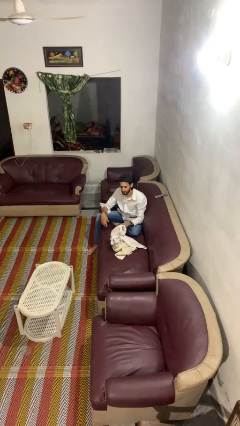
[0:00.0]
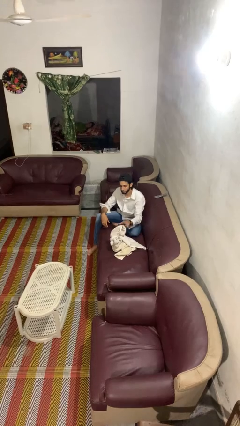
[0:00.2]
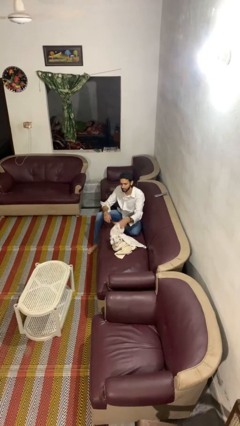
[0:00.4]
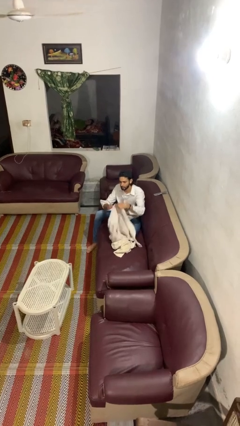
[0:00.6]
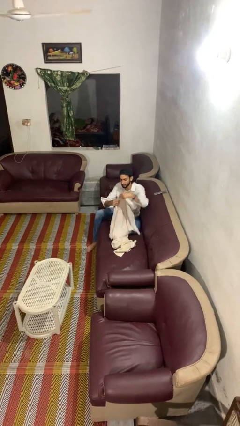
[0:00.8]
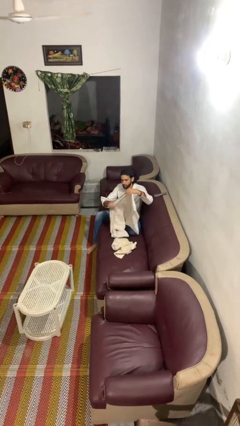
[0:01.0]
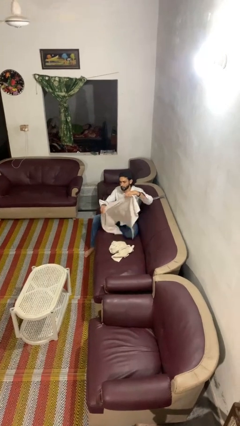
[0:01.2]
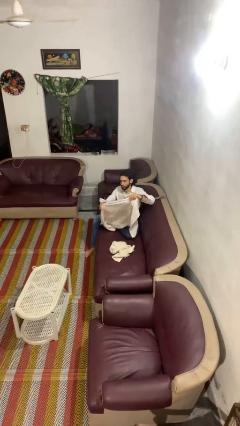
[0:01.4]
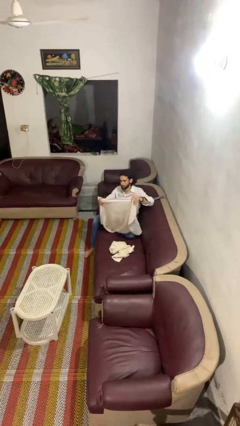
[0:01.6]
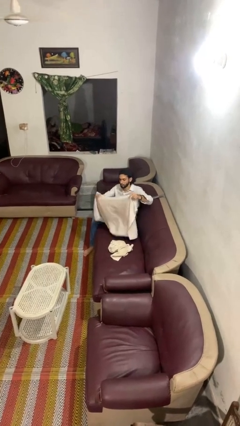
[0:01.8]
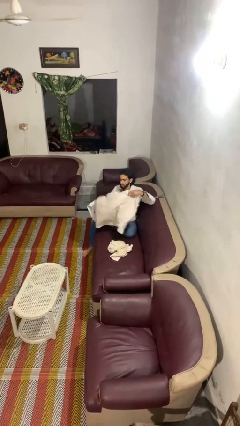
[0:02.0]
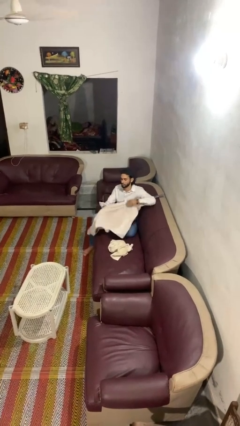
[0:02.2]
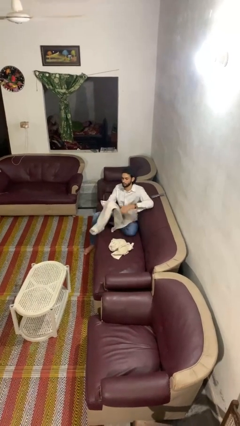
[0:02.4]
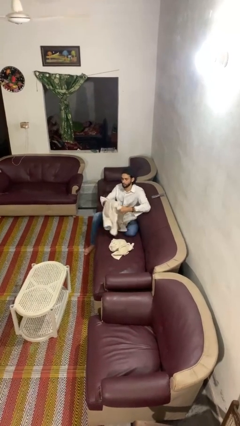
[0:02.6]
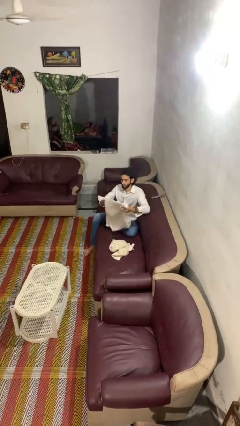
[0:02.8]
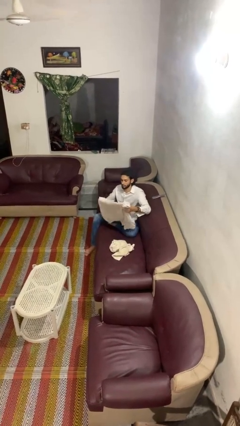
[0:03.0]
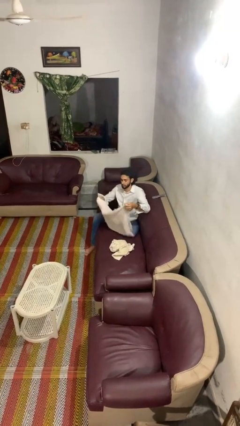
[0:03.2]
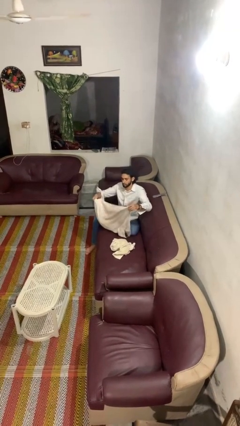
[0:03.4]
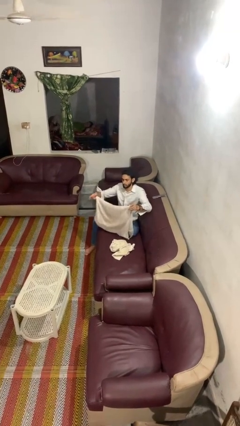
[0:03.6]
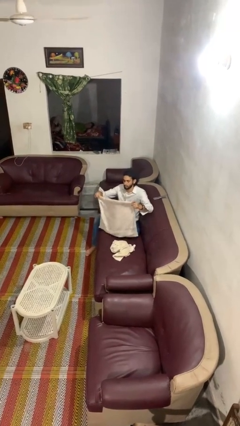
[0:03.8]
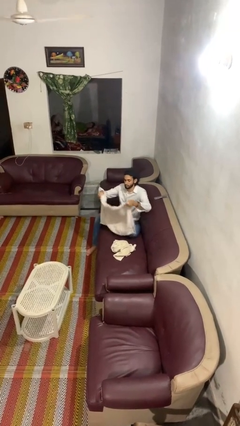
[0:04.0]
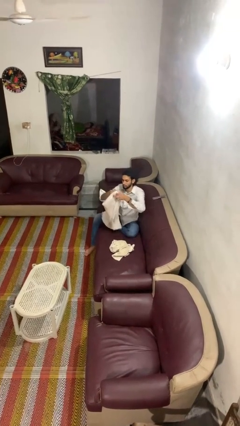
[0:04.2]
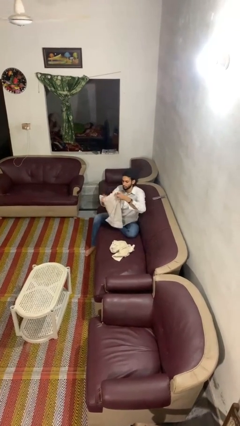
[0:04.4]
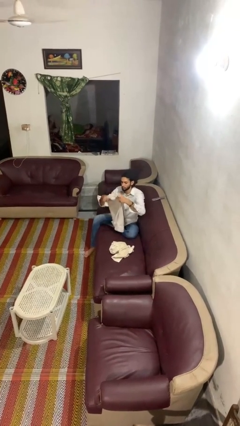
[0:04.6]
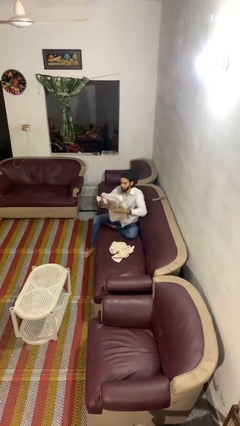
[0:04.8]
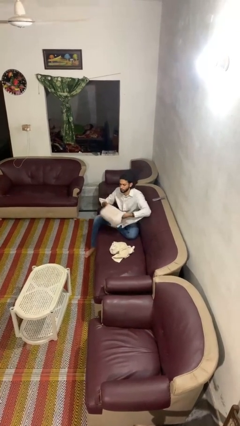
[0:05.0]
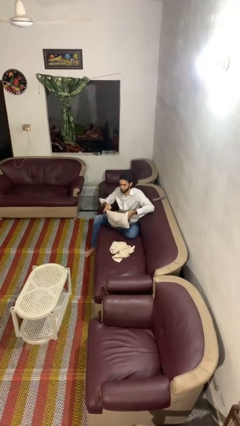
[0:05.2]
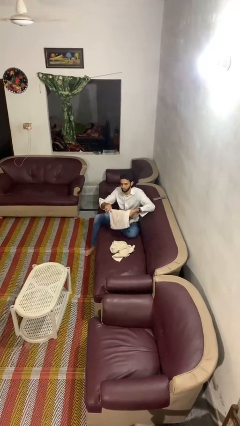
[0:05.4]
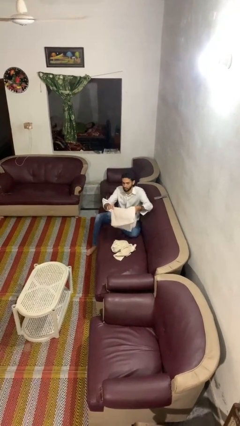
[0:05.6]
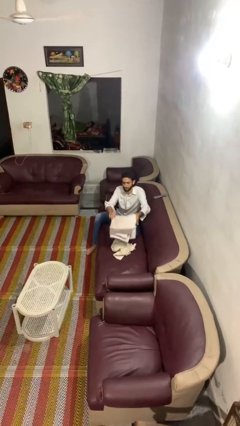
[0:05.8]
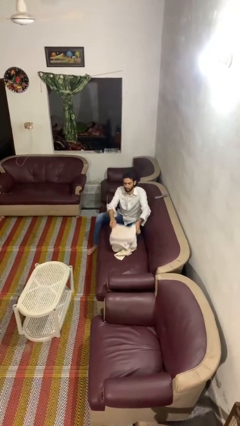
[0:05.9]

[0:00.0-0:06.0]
person folds towel

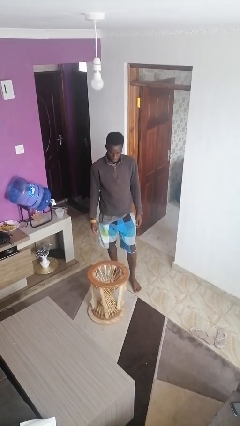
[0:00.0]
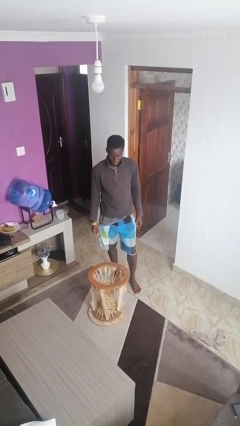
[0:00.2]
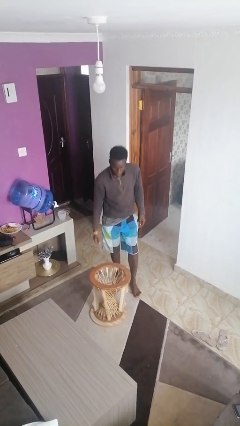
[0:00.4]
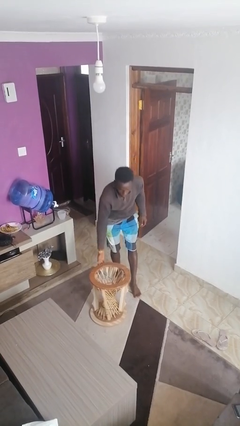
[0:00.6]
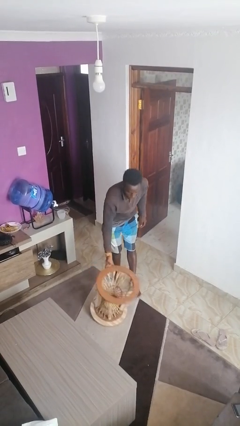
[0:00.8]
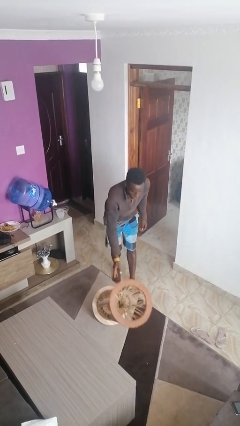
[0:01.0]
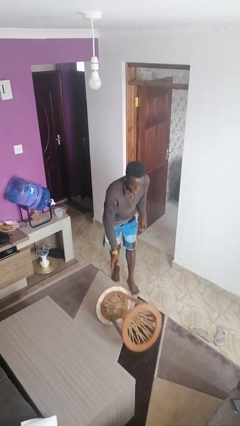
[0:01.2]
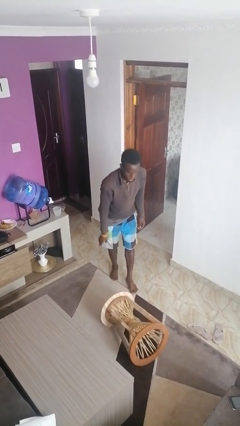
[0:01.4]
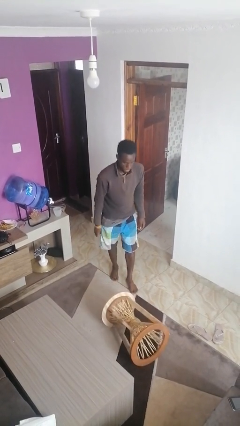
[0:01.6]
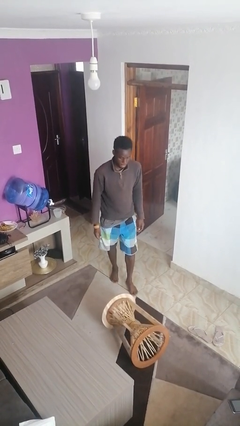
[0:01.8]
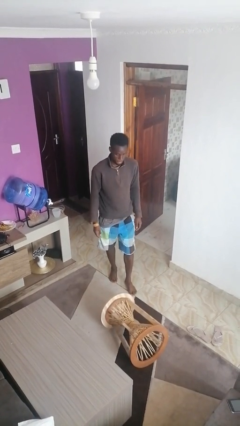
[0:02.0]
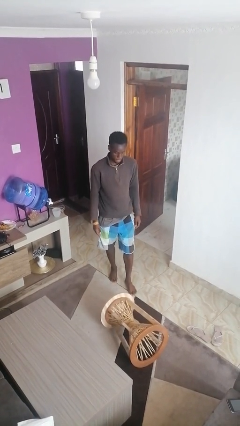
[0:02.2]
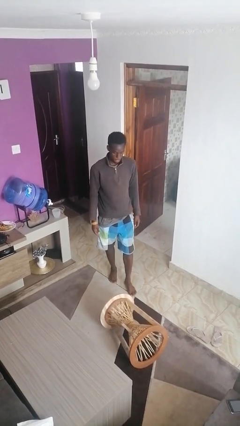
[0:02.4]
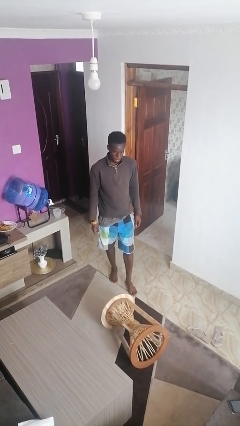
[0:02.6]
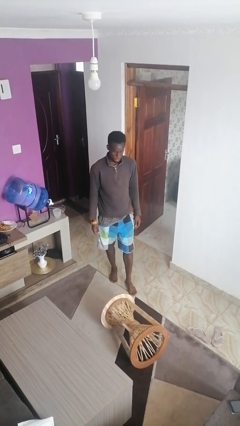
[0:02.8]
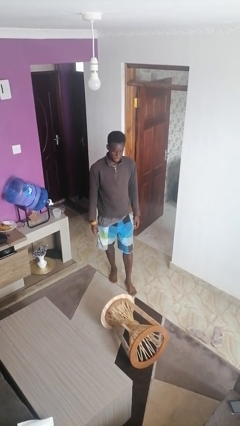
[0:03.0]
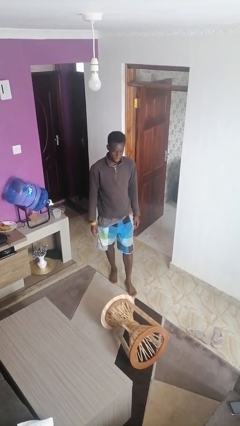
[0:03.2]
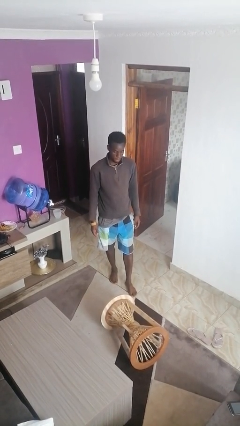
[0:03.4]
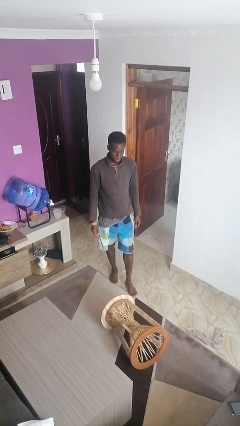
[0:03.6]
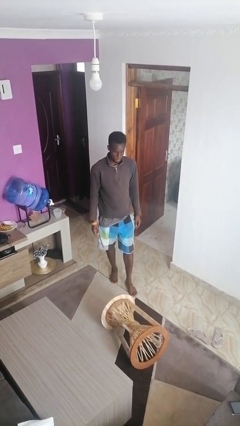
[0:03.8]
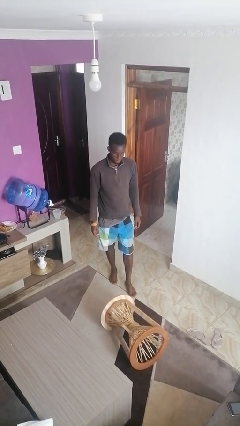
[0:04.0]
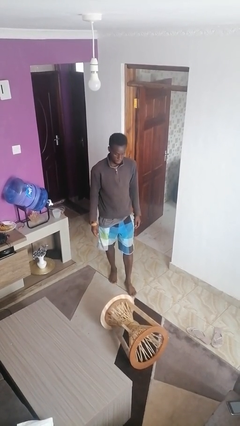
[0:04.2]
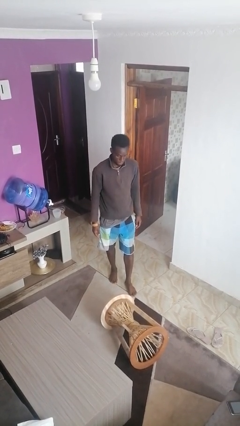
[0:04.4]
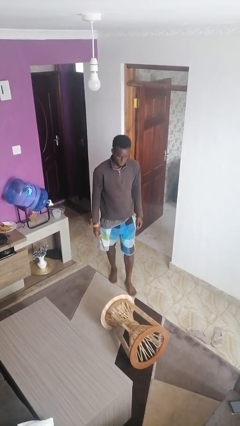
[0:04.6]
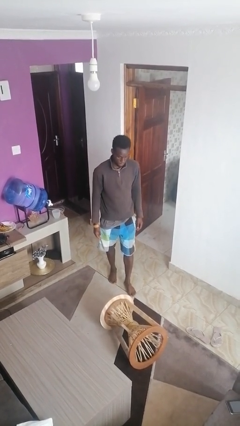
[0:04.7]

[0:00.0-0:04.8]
person knocks over furniture

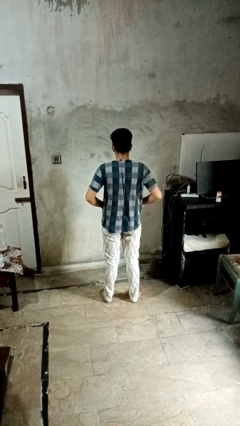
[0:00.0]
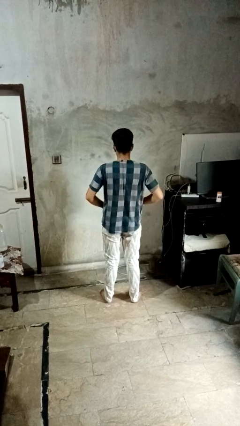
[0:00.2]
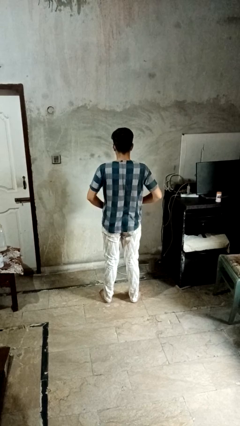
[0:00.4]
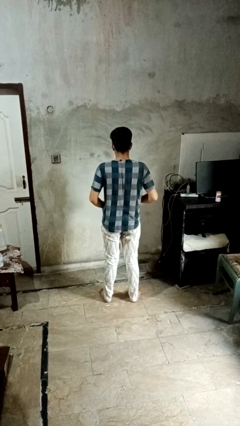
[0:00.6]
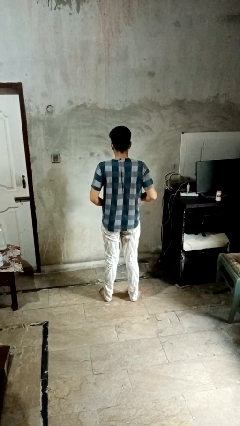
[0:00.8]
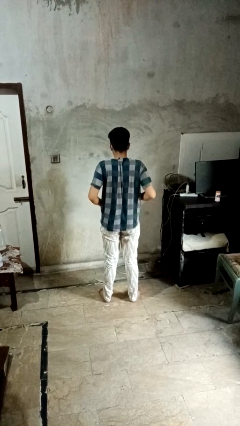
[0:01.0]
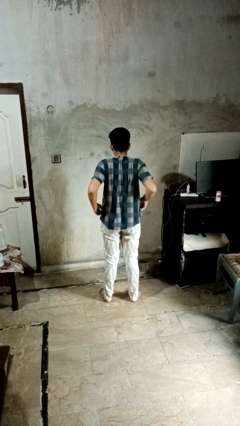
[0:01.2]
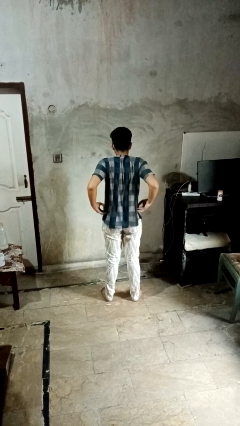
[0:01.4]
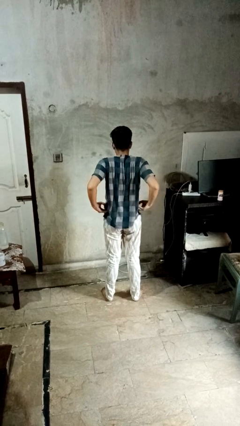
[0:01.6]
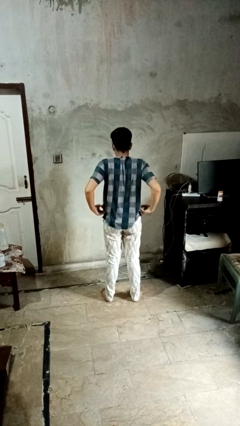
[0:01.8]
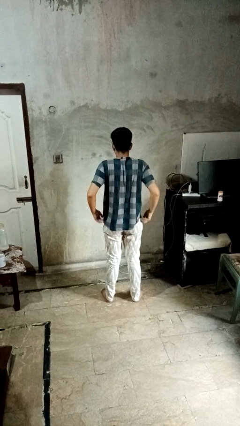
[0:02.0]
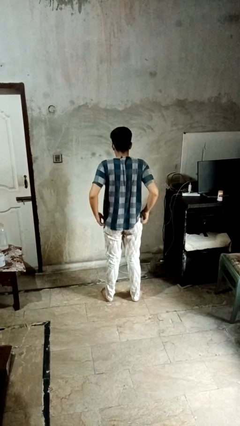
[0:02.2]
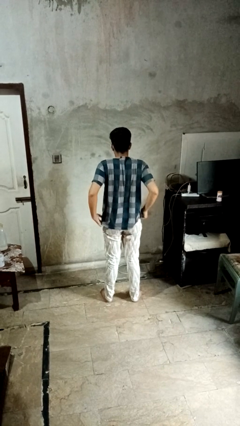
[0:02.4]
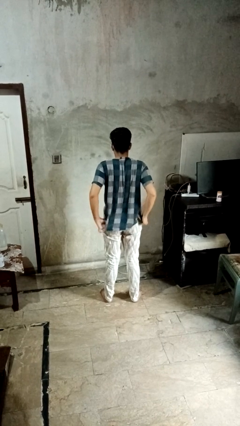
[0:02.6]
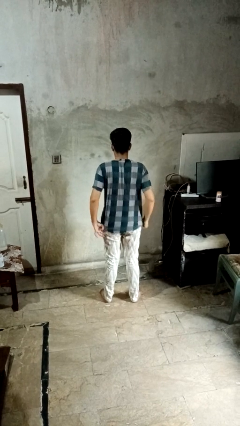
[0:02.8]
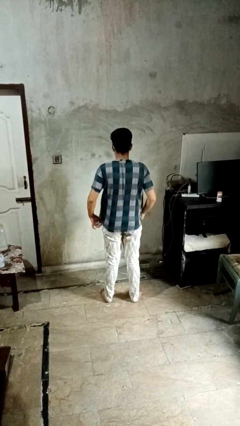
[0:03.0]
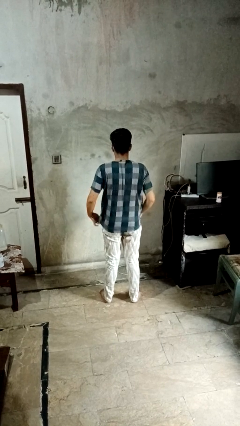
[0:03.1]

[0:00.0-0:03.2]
person hikes up pants

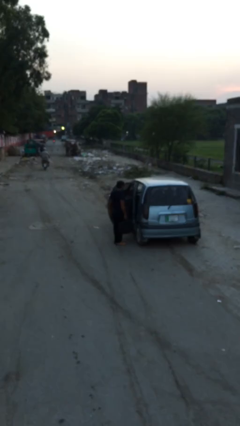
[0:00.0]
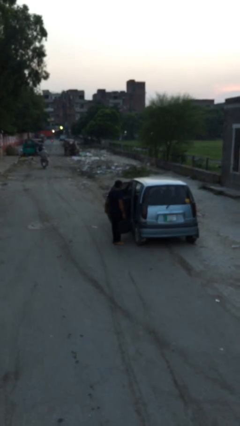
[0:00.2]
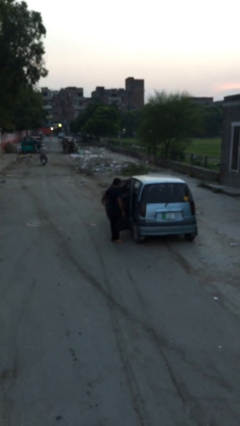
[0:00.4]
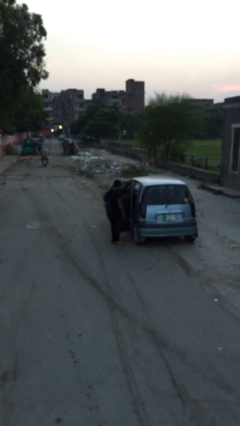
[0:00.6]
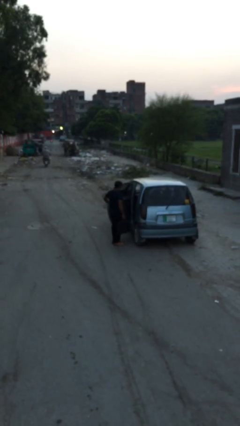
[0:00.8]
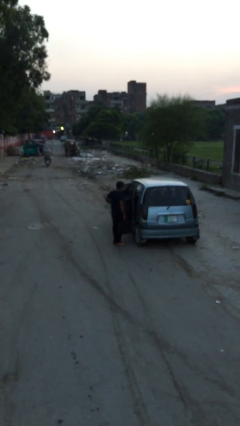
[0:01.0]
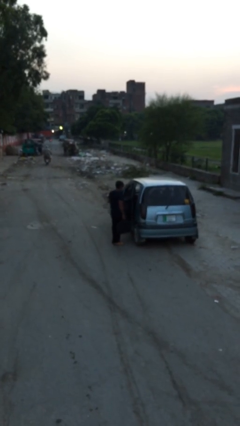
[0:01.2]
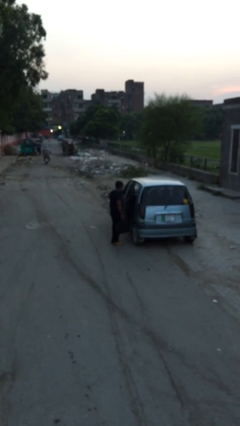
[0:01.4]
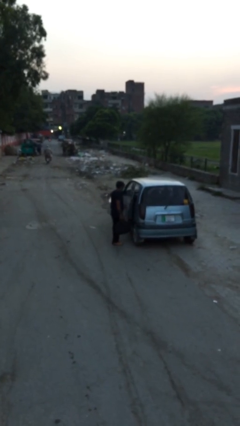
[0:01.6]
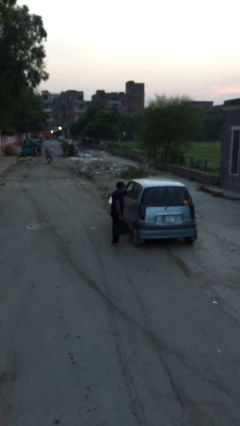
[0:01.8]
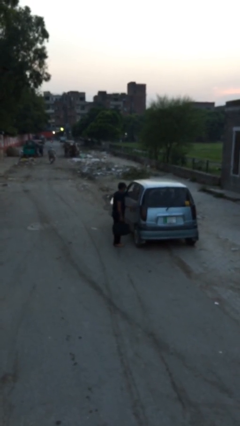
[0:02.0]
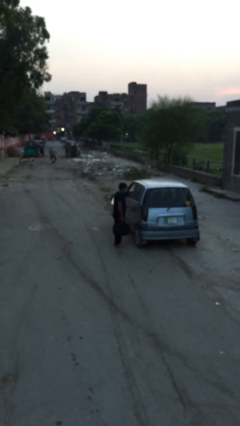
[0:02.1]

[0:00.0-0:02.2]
person closes car door

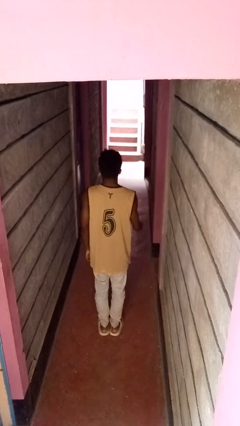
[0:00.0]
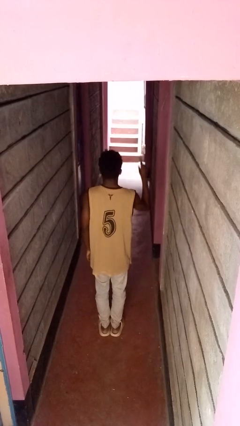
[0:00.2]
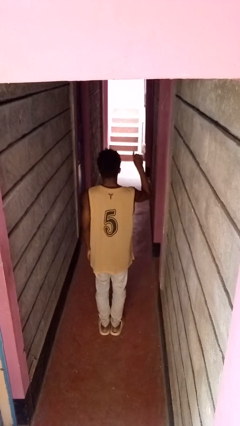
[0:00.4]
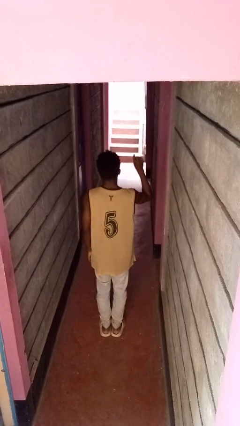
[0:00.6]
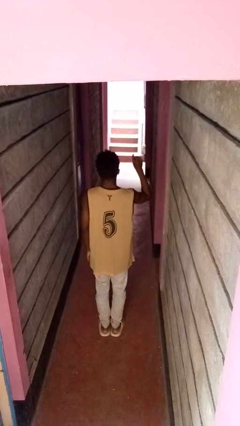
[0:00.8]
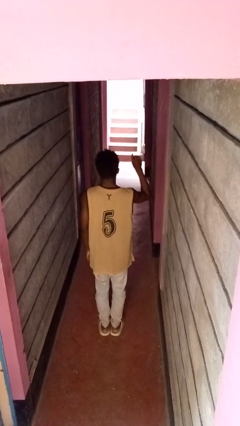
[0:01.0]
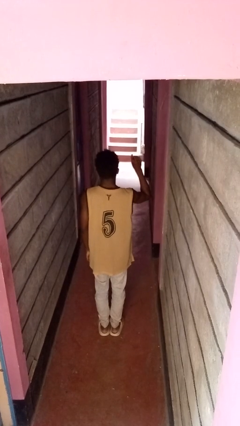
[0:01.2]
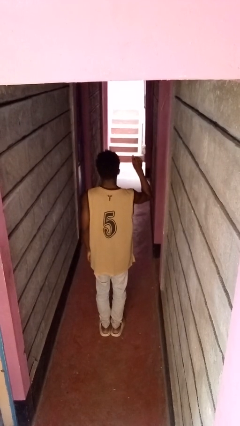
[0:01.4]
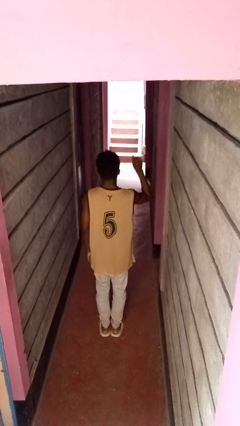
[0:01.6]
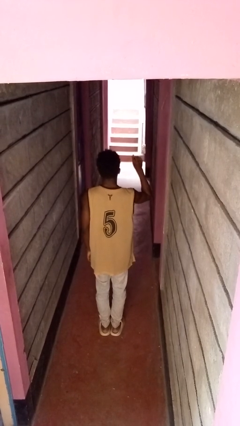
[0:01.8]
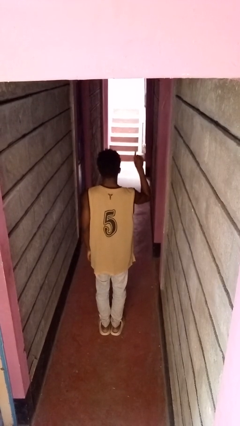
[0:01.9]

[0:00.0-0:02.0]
person gestures number one
